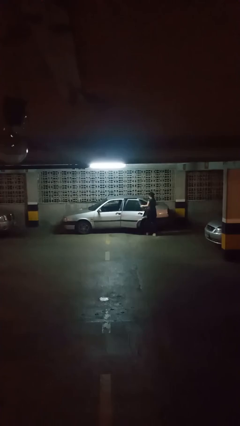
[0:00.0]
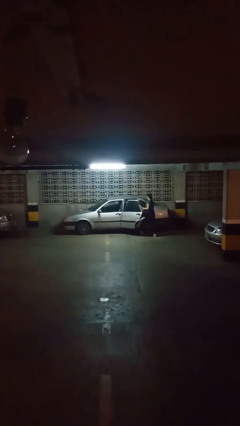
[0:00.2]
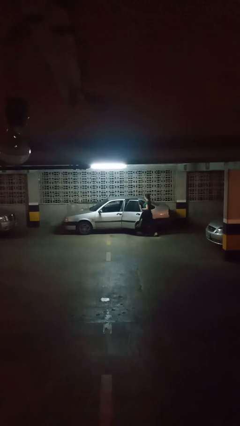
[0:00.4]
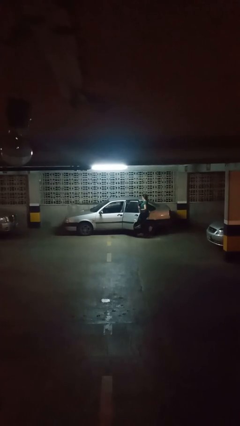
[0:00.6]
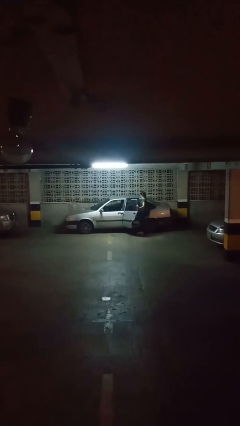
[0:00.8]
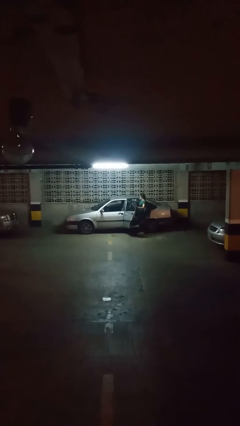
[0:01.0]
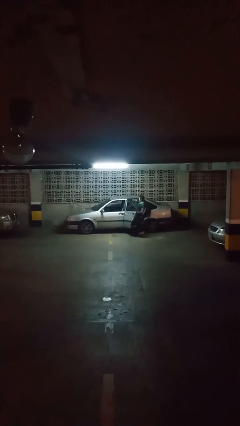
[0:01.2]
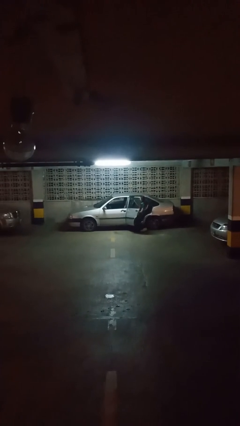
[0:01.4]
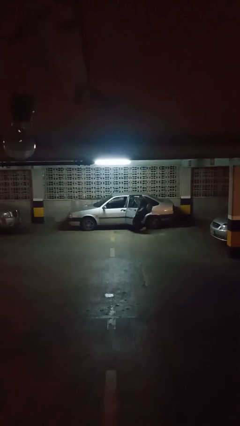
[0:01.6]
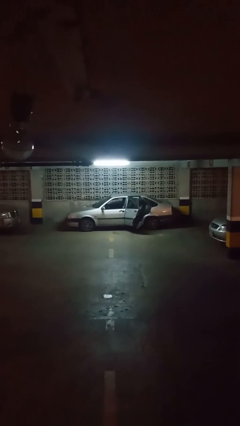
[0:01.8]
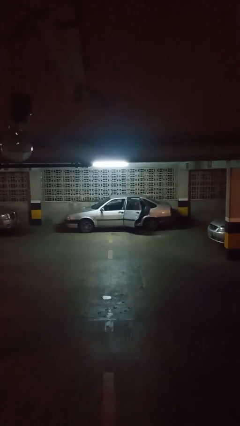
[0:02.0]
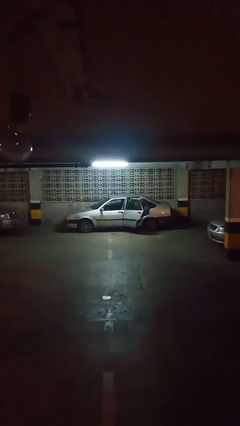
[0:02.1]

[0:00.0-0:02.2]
car picks up person

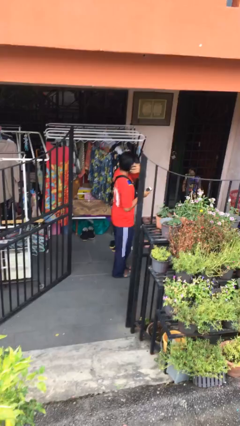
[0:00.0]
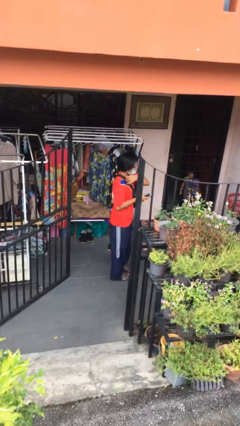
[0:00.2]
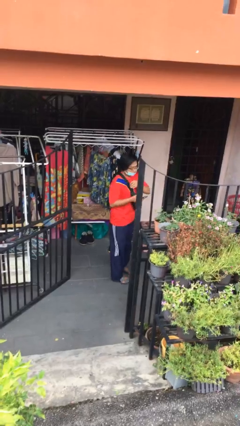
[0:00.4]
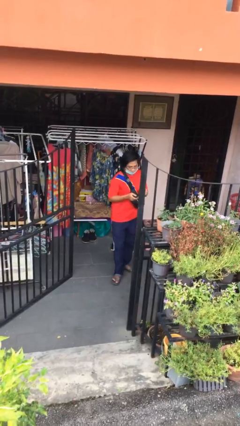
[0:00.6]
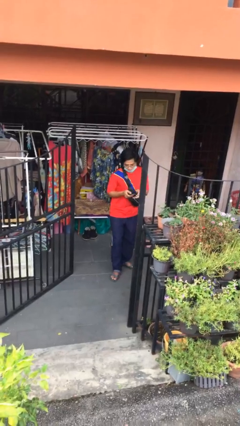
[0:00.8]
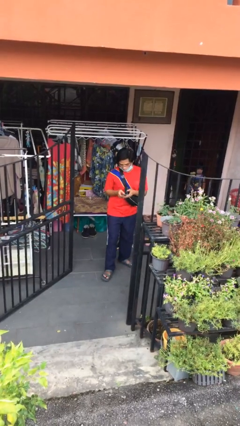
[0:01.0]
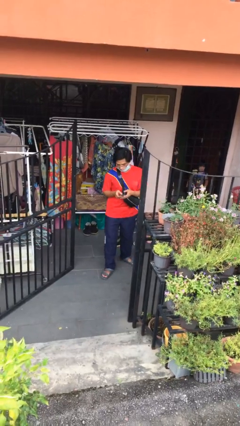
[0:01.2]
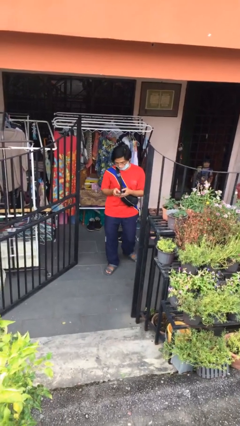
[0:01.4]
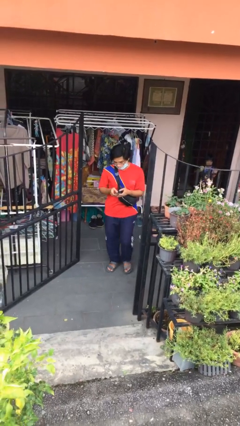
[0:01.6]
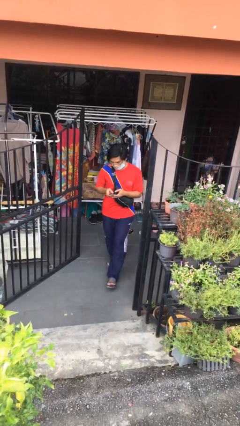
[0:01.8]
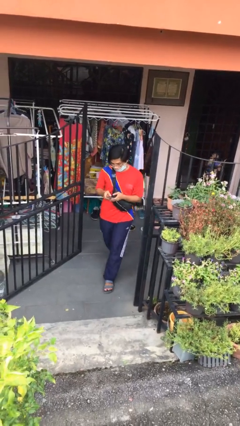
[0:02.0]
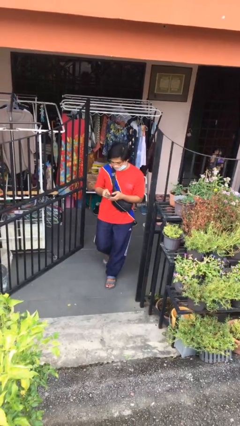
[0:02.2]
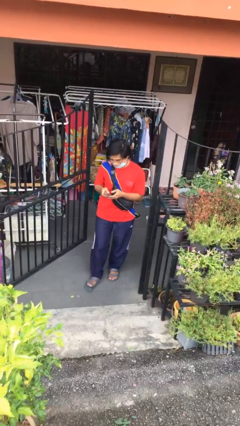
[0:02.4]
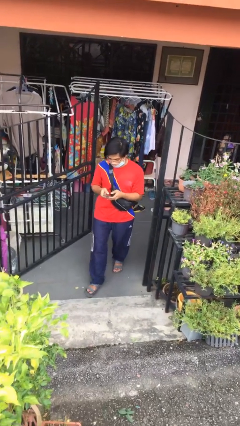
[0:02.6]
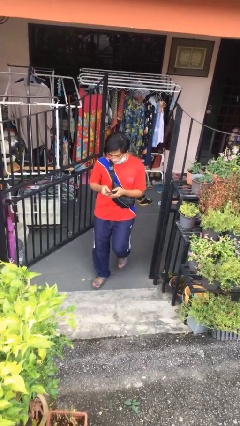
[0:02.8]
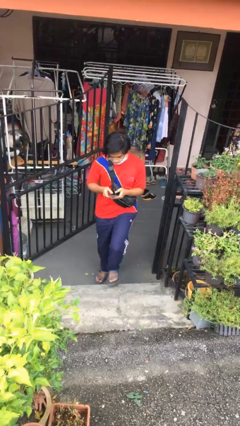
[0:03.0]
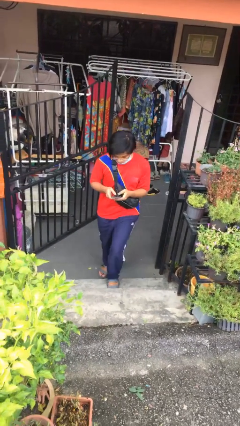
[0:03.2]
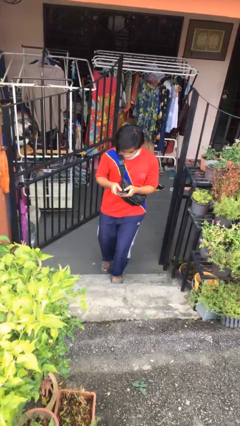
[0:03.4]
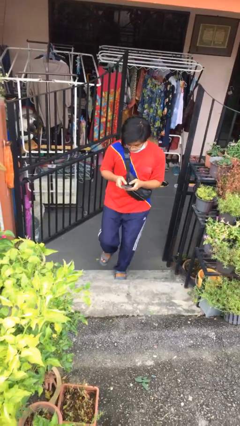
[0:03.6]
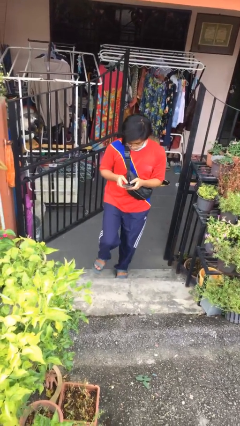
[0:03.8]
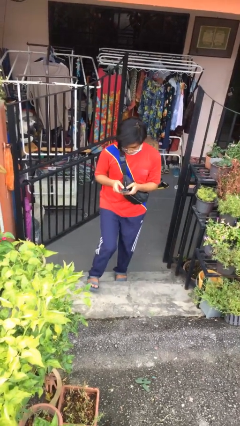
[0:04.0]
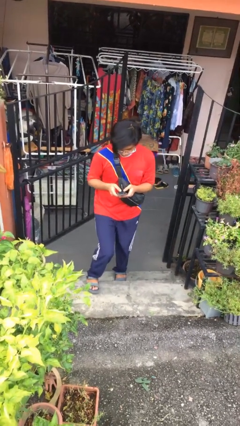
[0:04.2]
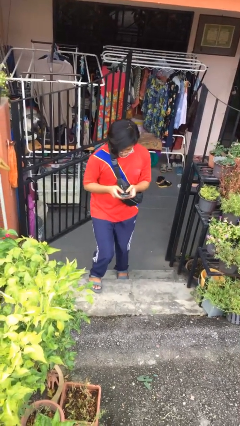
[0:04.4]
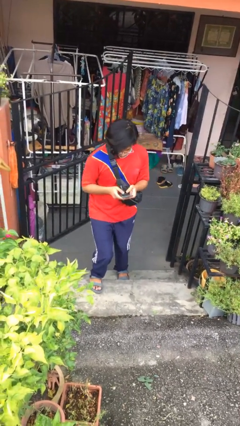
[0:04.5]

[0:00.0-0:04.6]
person enters scene through structure

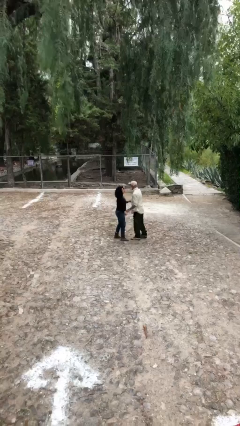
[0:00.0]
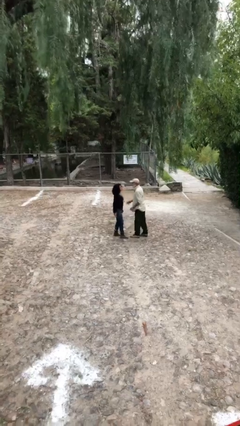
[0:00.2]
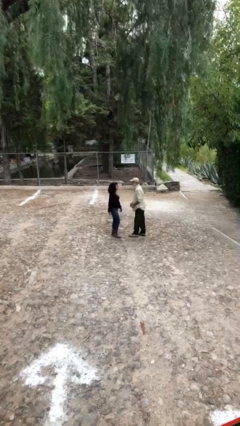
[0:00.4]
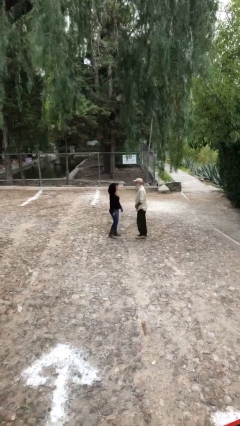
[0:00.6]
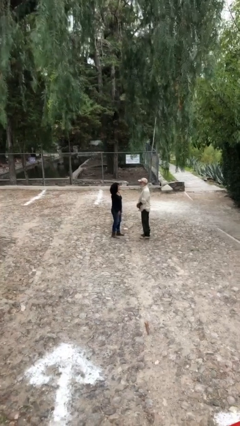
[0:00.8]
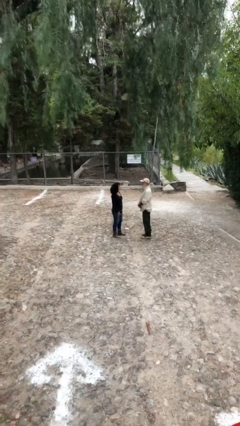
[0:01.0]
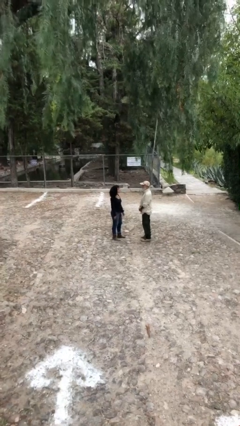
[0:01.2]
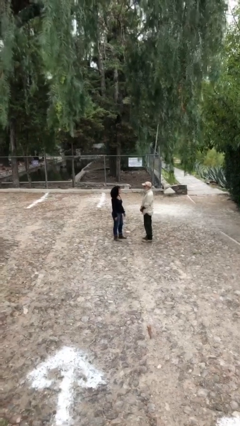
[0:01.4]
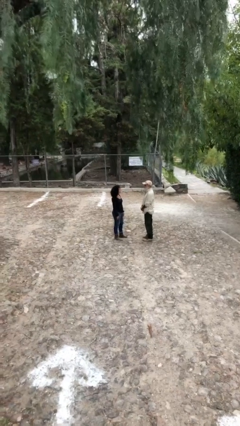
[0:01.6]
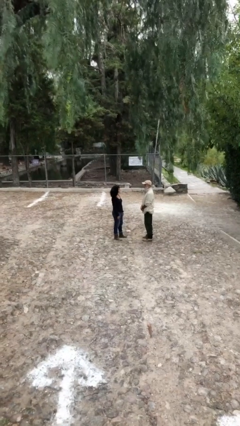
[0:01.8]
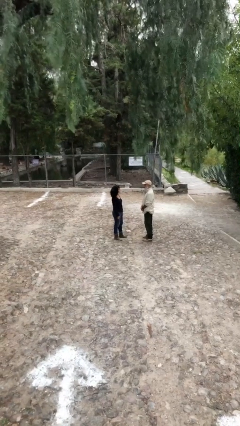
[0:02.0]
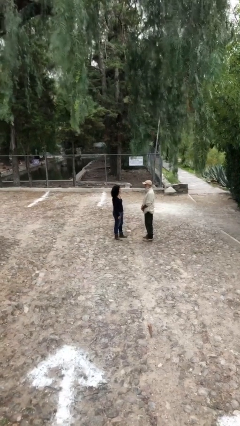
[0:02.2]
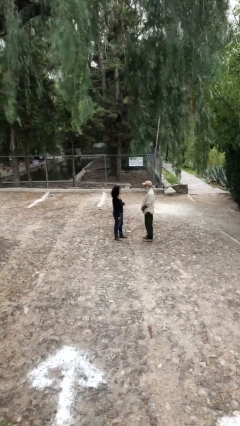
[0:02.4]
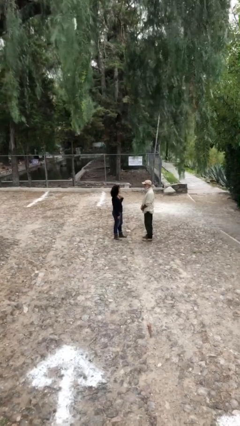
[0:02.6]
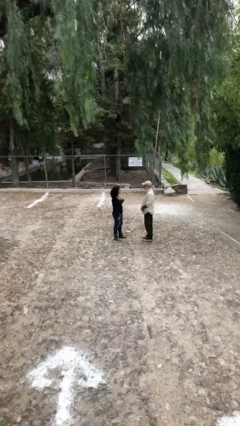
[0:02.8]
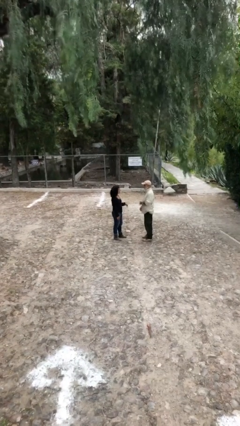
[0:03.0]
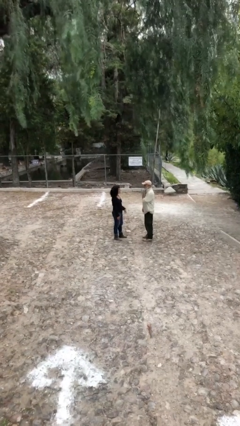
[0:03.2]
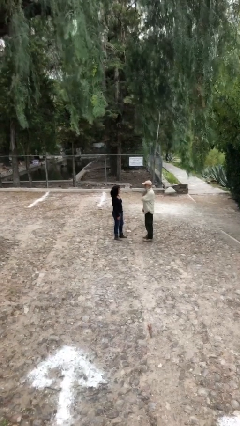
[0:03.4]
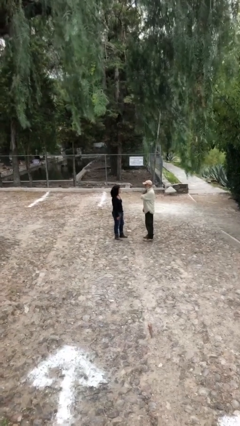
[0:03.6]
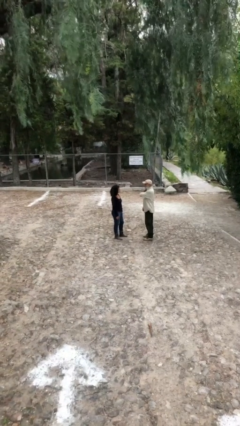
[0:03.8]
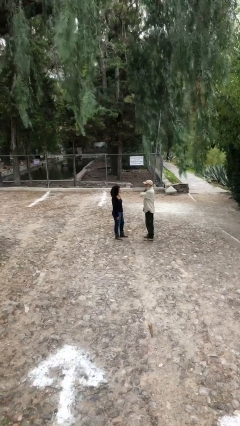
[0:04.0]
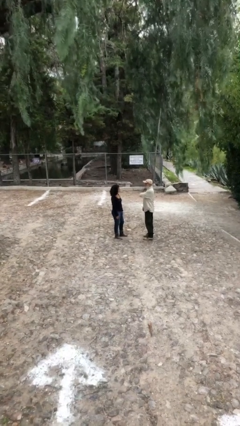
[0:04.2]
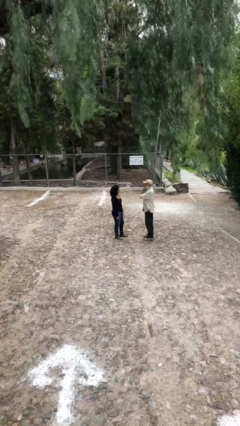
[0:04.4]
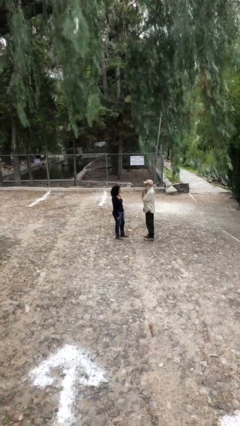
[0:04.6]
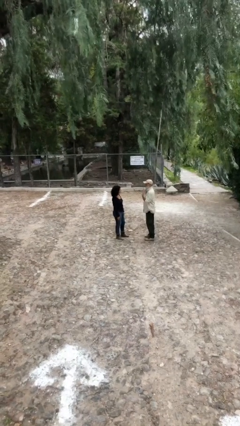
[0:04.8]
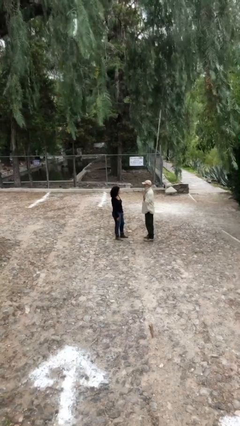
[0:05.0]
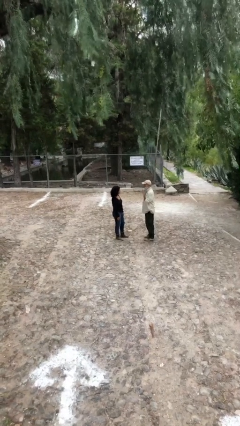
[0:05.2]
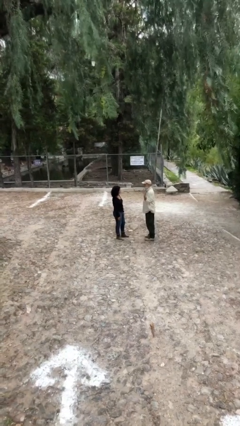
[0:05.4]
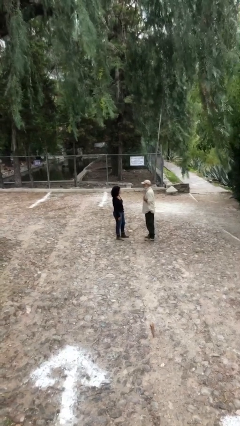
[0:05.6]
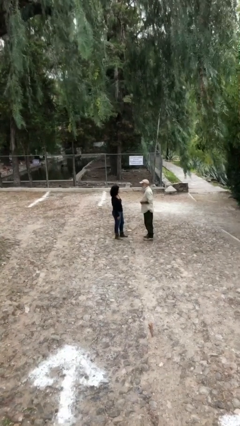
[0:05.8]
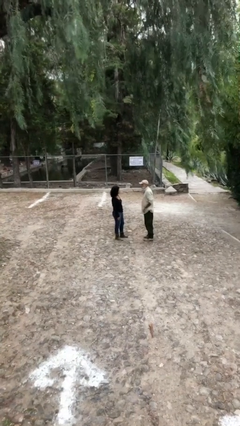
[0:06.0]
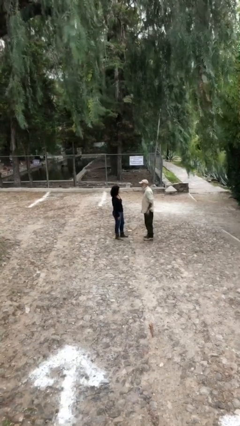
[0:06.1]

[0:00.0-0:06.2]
person talks to person

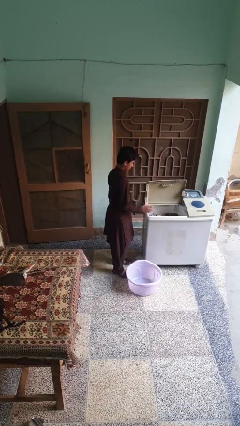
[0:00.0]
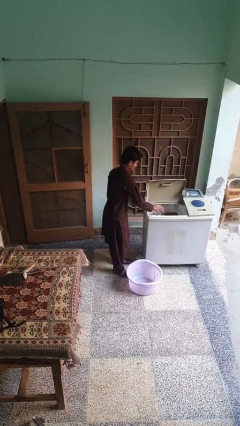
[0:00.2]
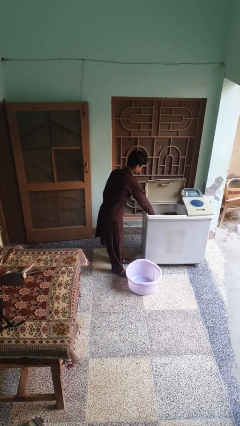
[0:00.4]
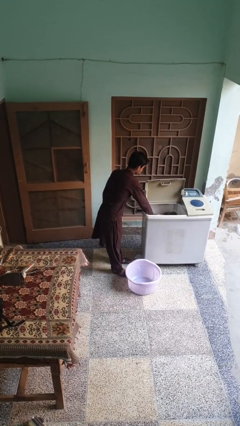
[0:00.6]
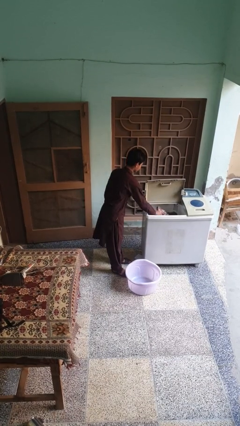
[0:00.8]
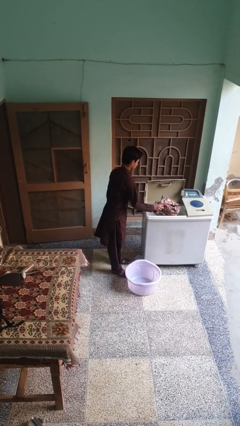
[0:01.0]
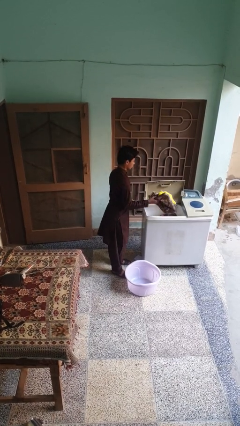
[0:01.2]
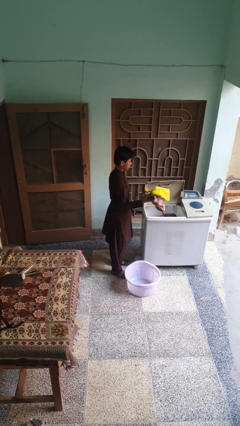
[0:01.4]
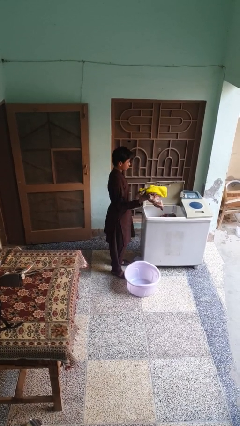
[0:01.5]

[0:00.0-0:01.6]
person loads clotheswasher

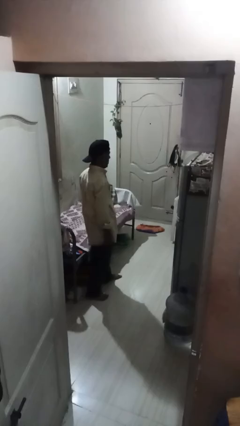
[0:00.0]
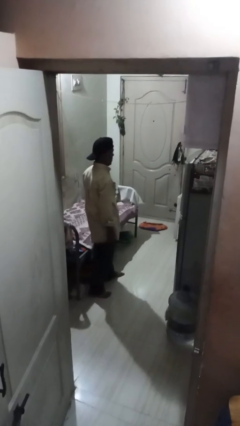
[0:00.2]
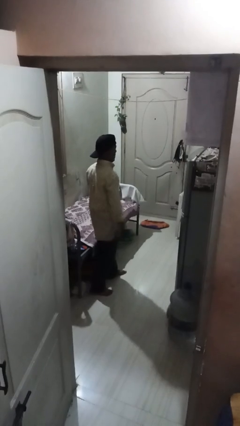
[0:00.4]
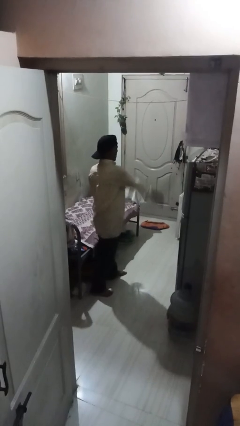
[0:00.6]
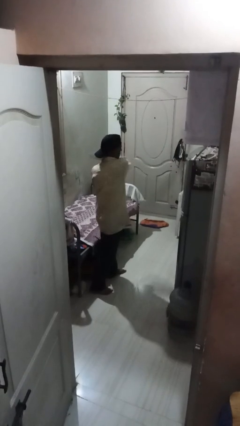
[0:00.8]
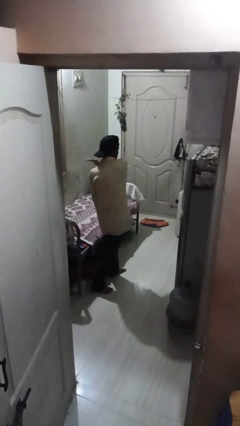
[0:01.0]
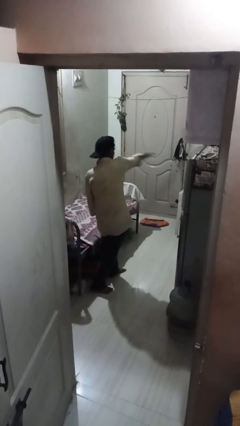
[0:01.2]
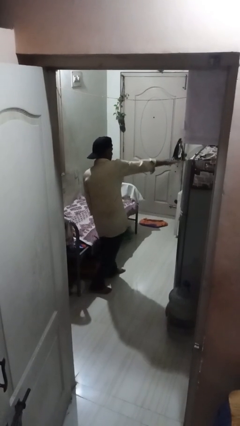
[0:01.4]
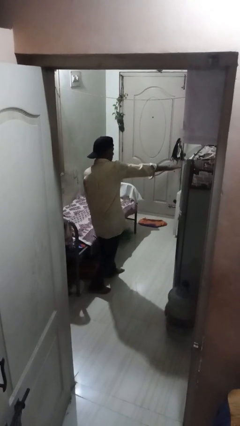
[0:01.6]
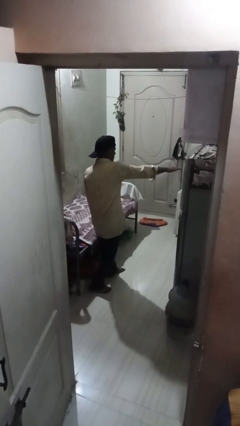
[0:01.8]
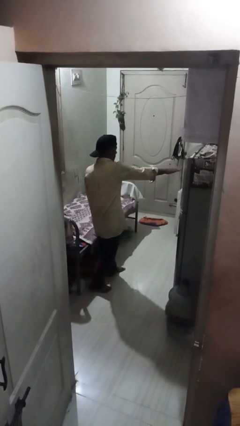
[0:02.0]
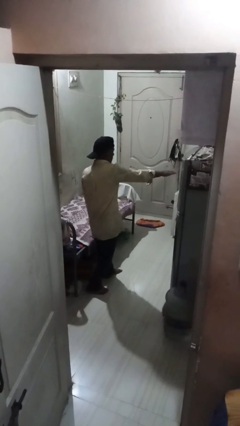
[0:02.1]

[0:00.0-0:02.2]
person karate chop

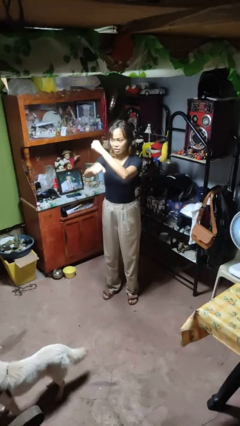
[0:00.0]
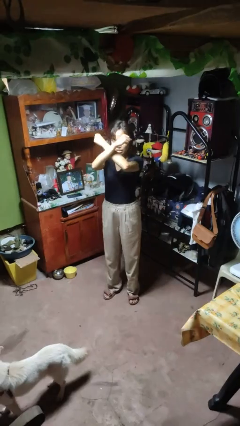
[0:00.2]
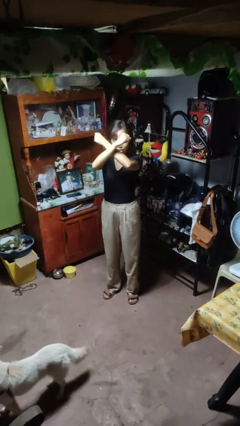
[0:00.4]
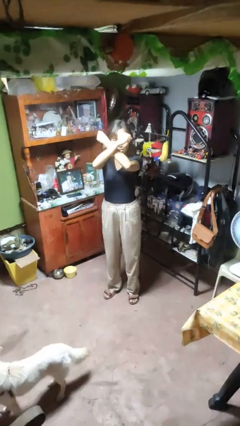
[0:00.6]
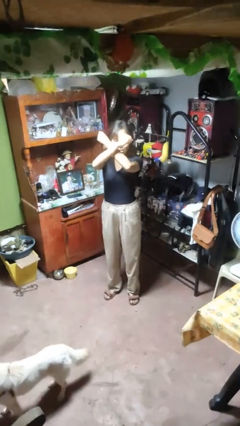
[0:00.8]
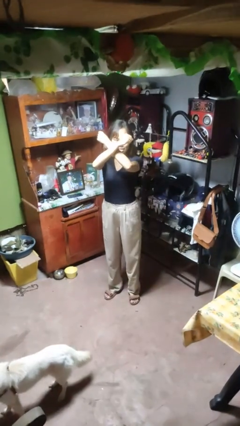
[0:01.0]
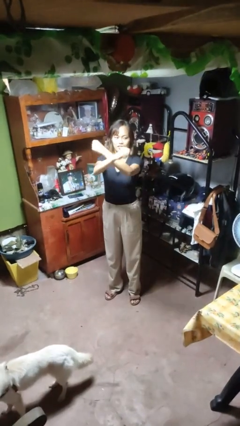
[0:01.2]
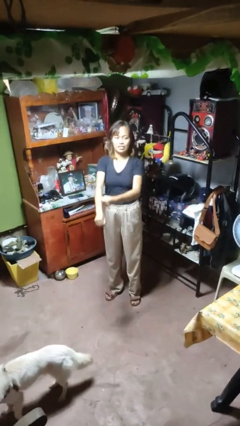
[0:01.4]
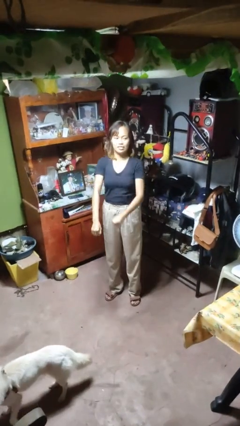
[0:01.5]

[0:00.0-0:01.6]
person gestures arms x
